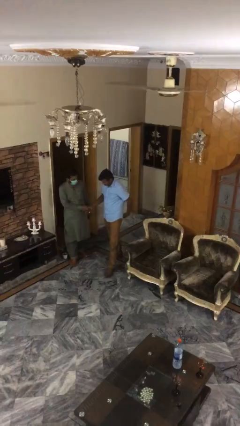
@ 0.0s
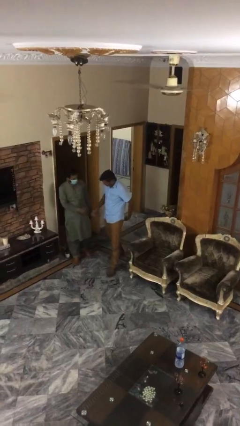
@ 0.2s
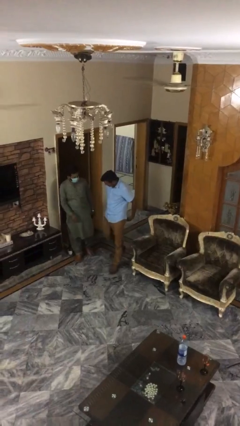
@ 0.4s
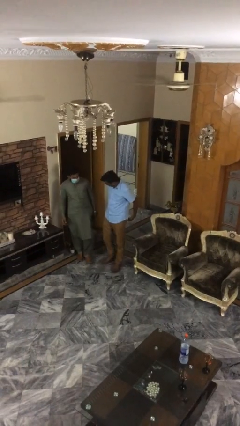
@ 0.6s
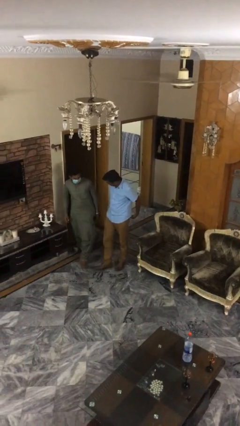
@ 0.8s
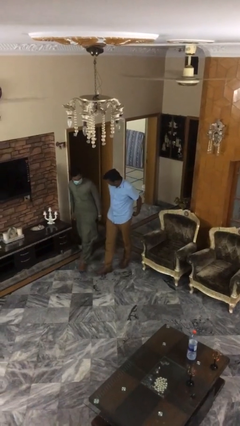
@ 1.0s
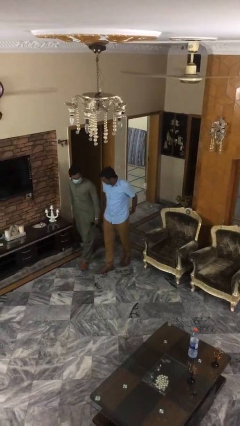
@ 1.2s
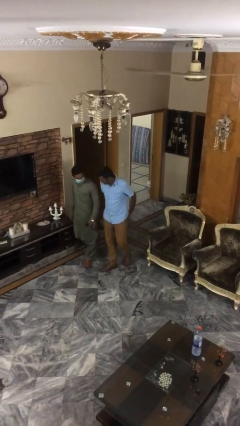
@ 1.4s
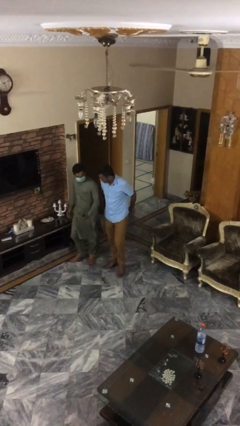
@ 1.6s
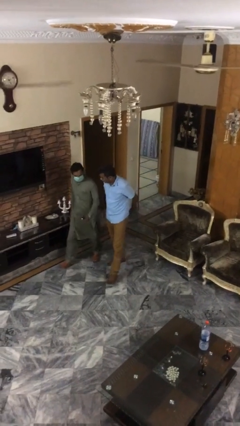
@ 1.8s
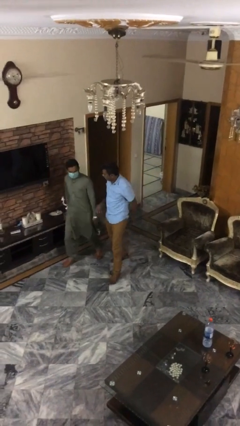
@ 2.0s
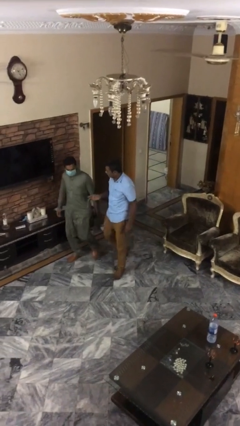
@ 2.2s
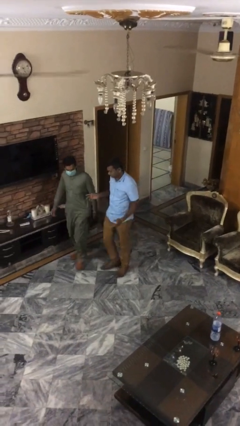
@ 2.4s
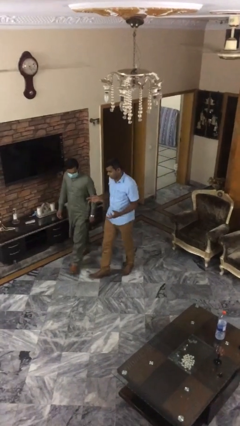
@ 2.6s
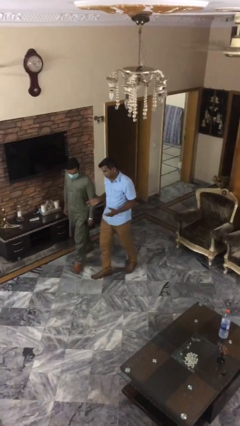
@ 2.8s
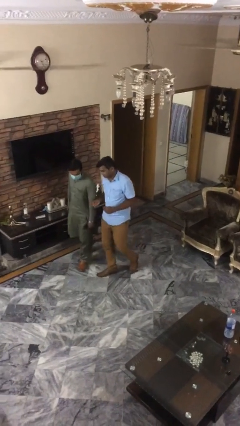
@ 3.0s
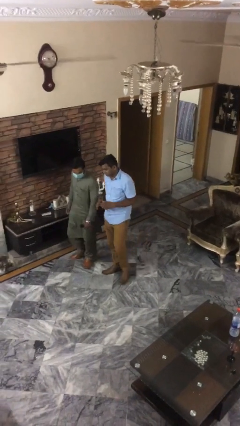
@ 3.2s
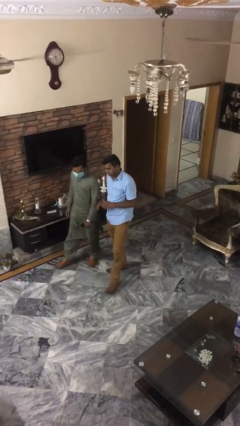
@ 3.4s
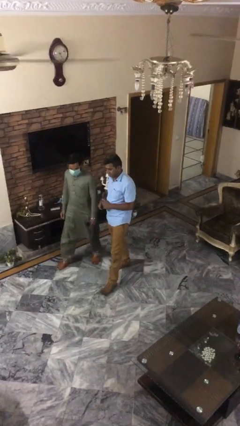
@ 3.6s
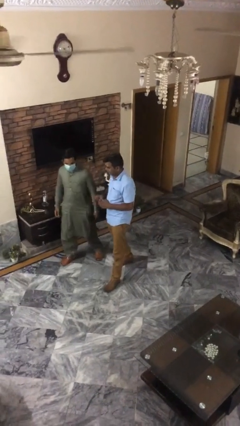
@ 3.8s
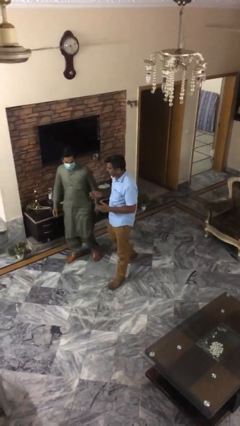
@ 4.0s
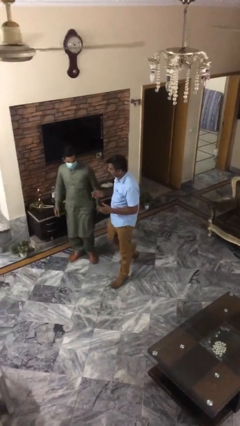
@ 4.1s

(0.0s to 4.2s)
person talks to person

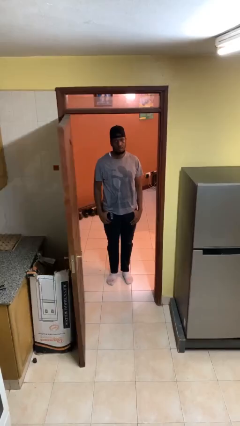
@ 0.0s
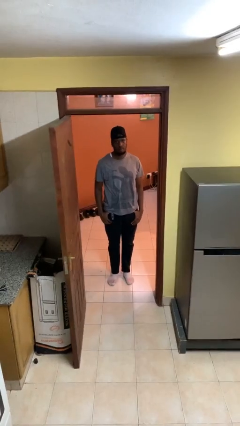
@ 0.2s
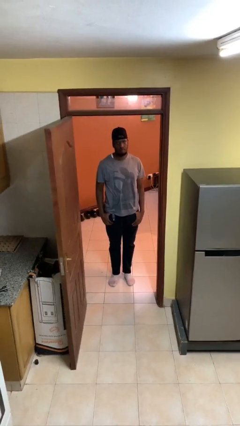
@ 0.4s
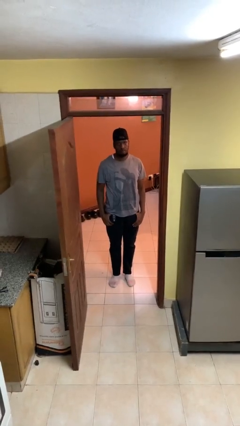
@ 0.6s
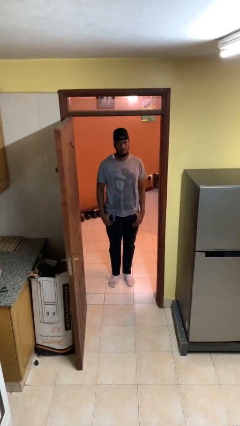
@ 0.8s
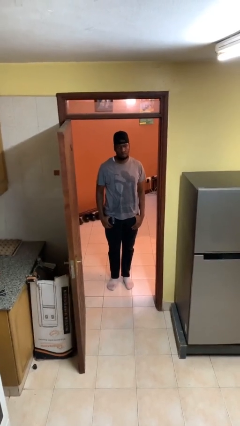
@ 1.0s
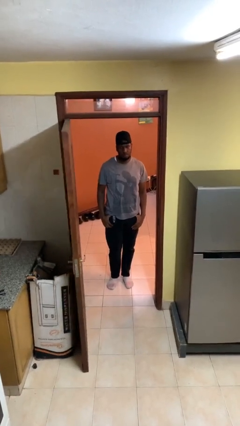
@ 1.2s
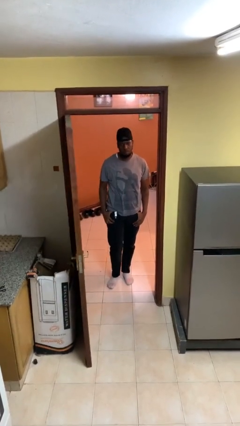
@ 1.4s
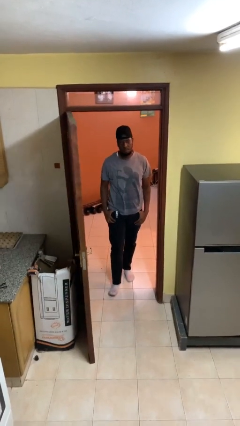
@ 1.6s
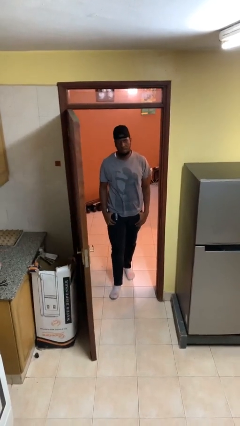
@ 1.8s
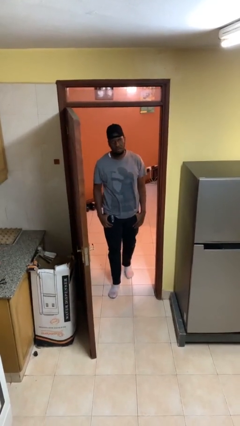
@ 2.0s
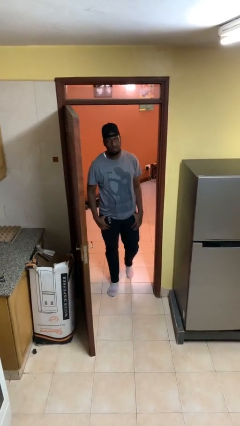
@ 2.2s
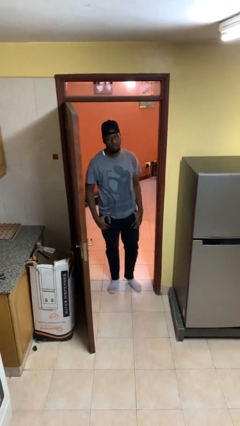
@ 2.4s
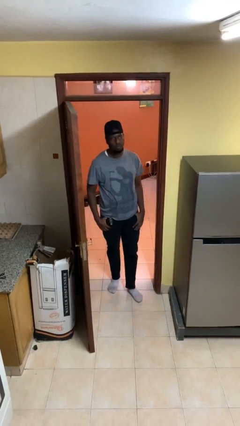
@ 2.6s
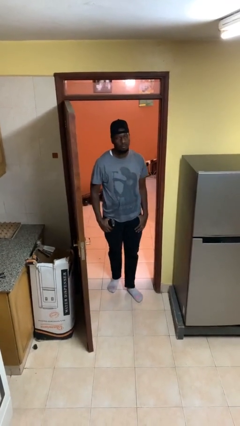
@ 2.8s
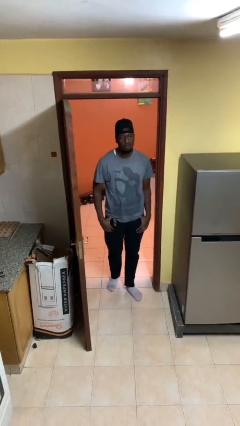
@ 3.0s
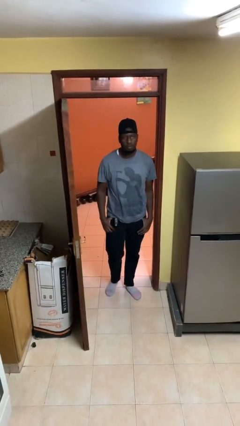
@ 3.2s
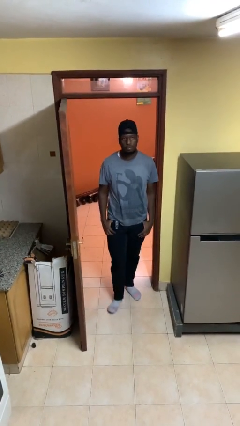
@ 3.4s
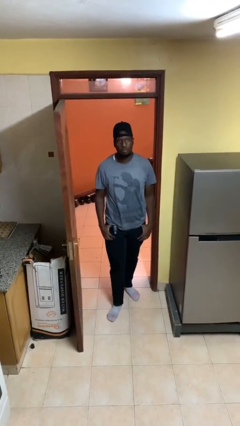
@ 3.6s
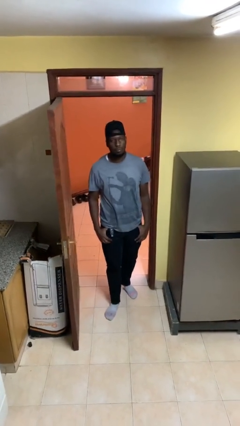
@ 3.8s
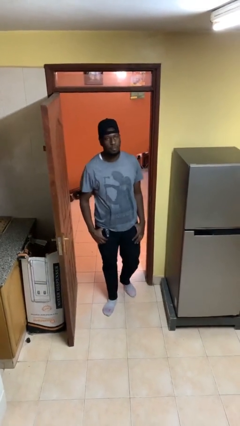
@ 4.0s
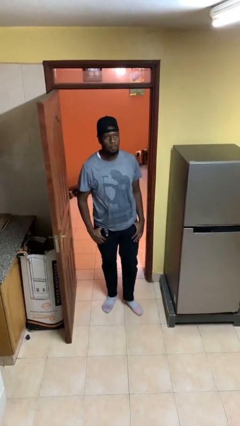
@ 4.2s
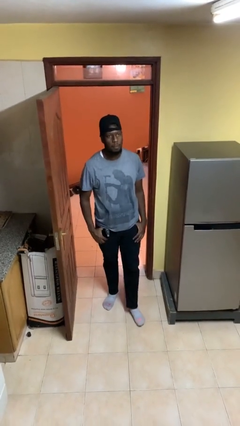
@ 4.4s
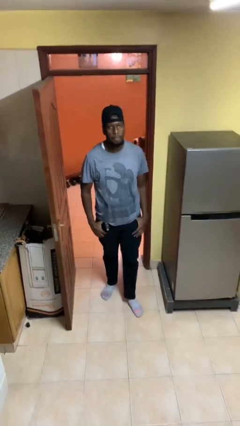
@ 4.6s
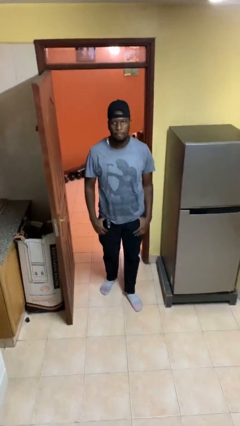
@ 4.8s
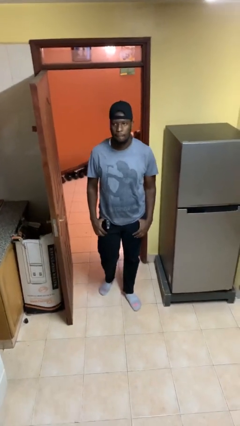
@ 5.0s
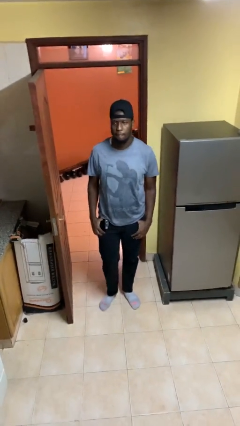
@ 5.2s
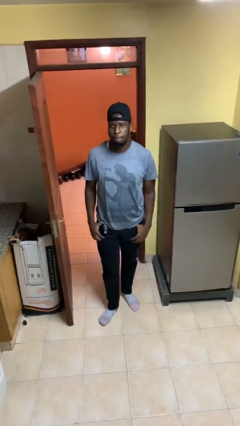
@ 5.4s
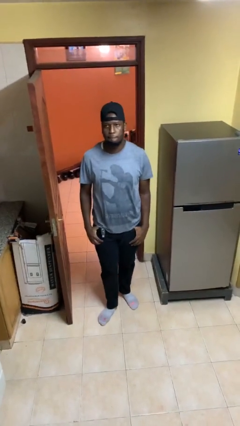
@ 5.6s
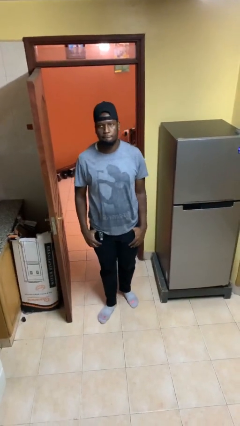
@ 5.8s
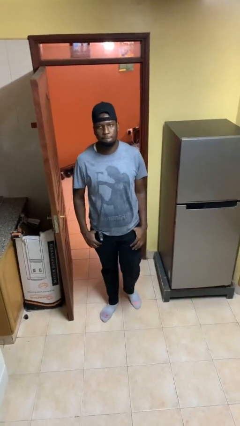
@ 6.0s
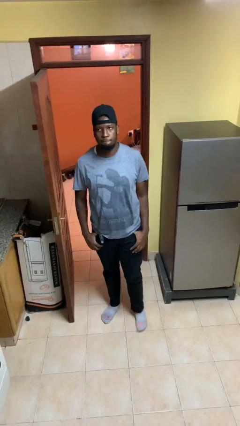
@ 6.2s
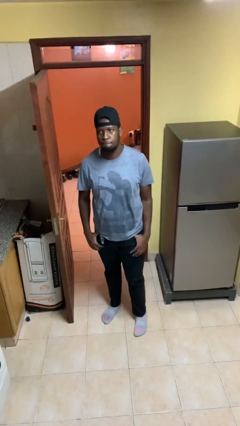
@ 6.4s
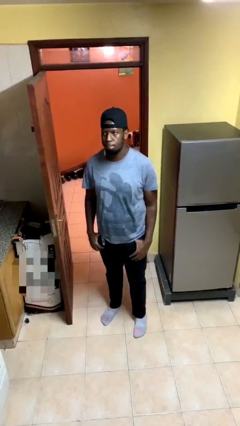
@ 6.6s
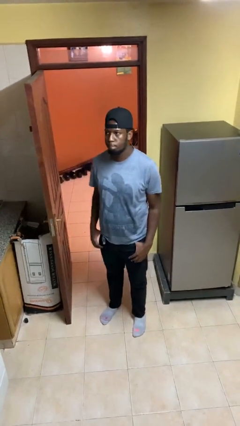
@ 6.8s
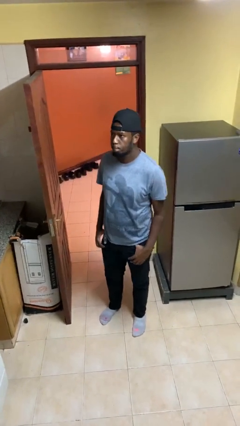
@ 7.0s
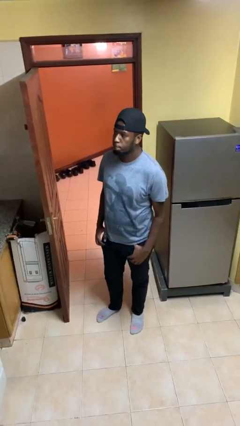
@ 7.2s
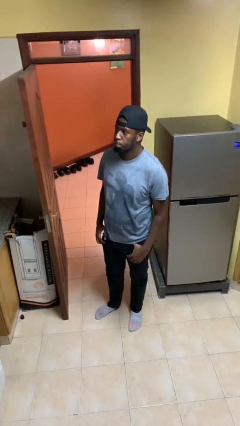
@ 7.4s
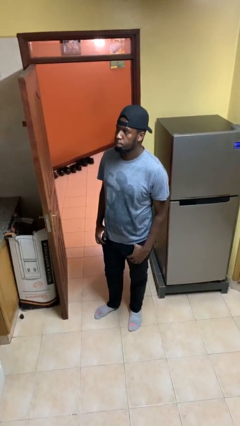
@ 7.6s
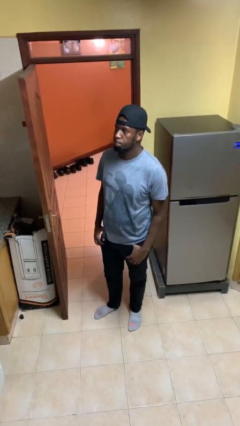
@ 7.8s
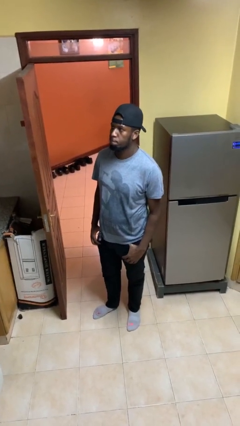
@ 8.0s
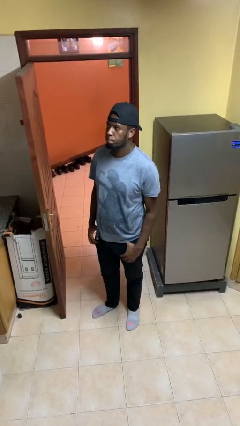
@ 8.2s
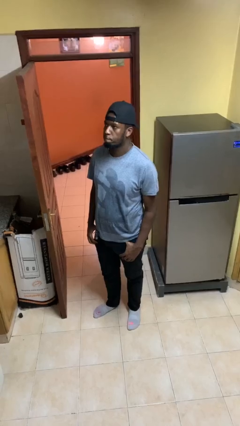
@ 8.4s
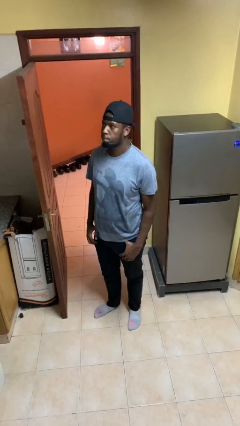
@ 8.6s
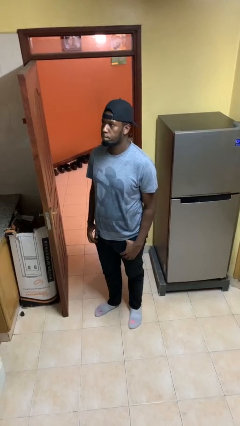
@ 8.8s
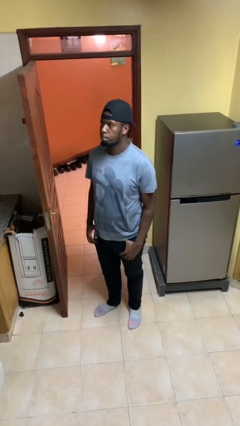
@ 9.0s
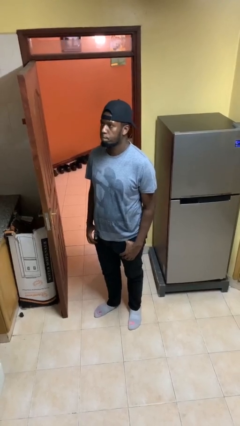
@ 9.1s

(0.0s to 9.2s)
person enters scene through structure

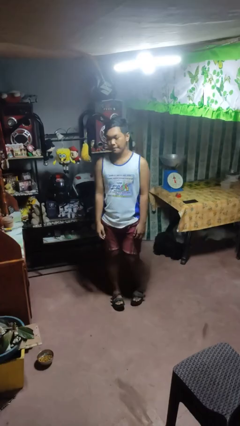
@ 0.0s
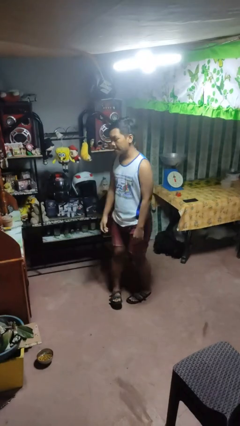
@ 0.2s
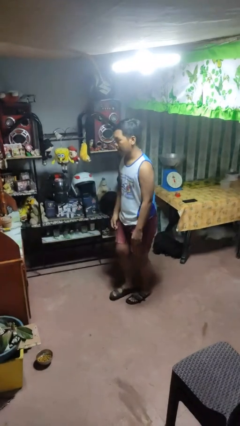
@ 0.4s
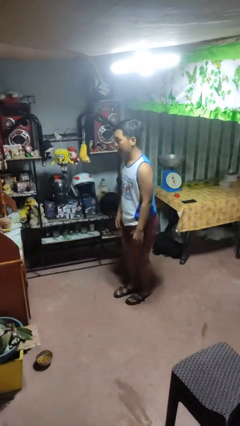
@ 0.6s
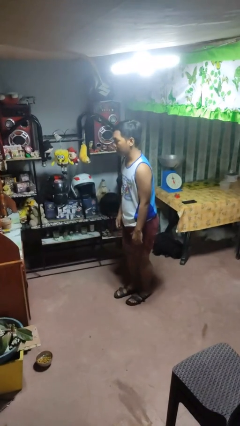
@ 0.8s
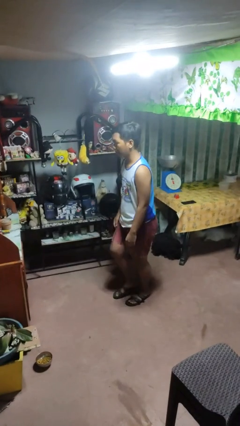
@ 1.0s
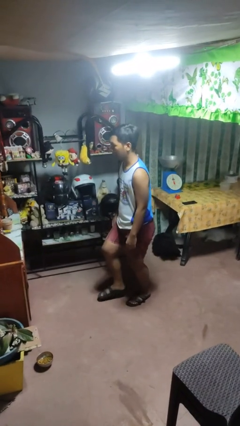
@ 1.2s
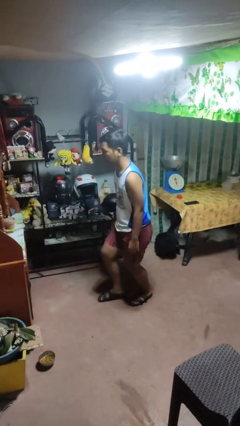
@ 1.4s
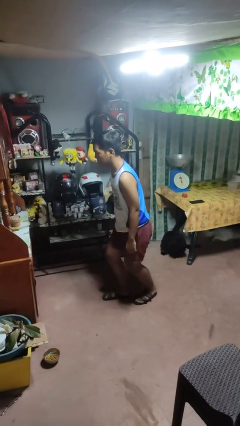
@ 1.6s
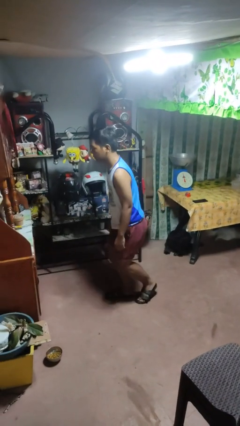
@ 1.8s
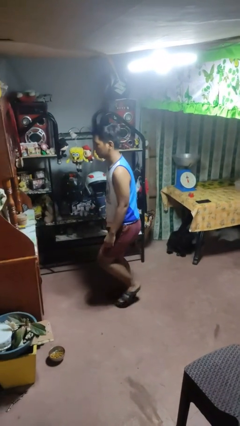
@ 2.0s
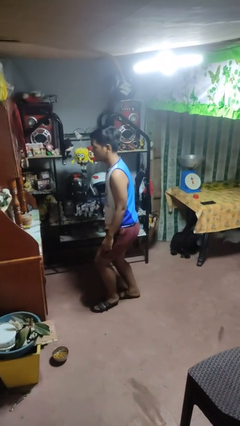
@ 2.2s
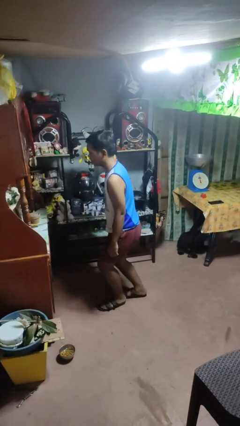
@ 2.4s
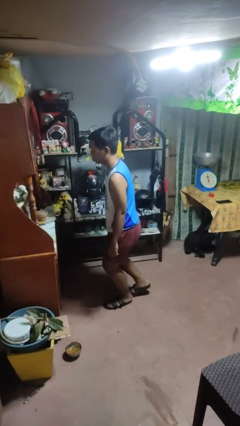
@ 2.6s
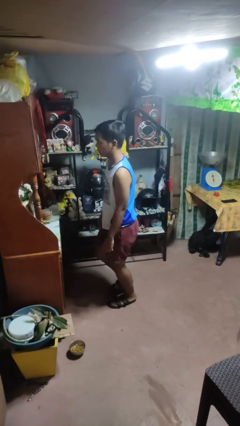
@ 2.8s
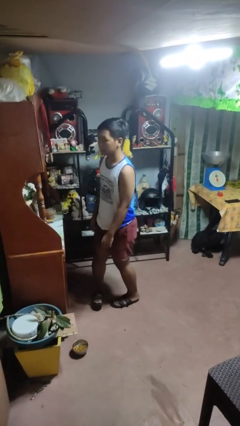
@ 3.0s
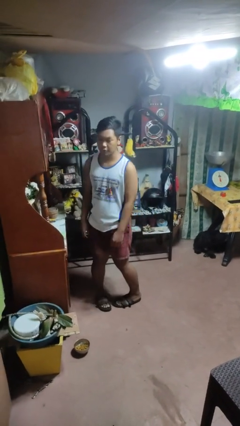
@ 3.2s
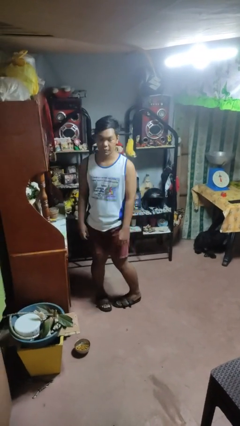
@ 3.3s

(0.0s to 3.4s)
person walks tiptoe

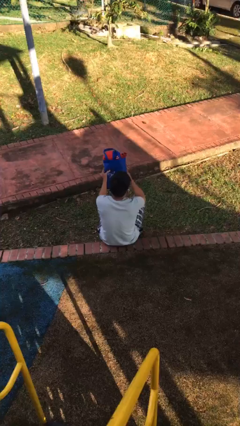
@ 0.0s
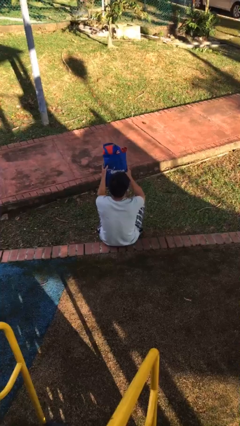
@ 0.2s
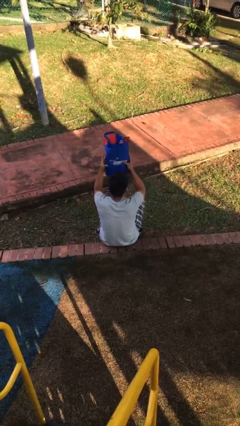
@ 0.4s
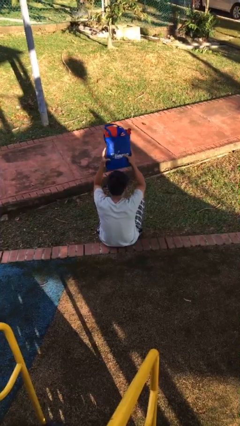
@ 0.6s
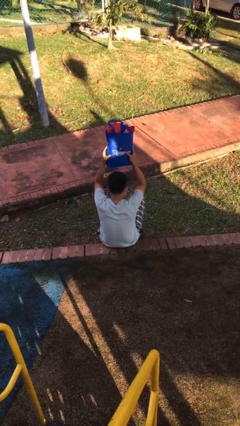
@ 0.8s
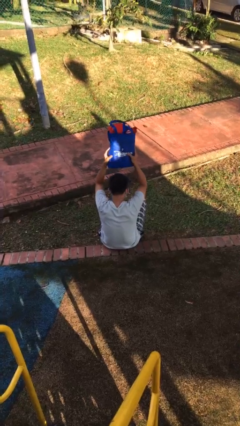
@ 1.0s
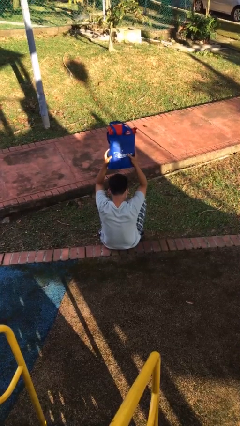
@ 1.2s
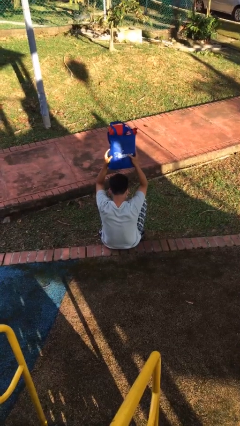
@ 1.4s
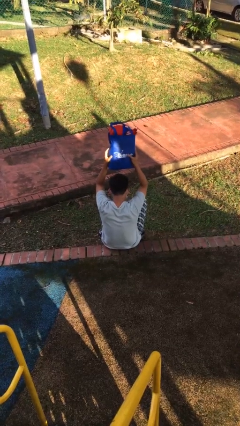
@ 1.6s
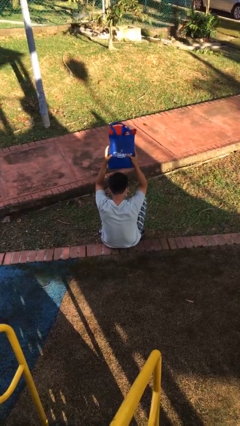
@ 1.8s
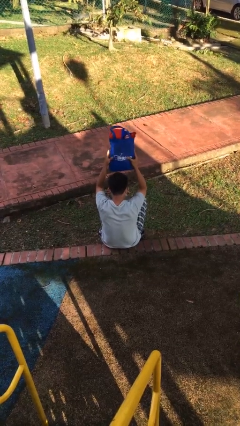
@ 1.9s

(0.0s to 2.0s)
person holds object above head
